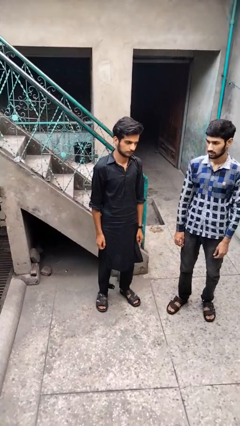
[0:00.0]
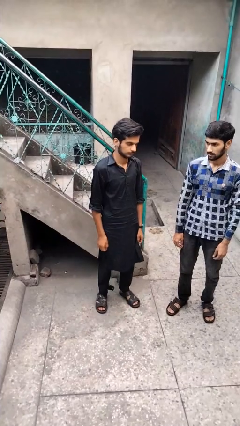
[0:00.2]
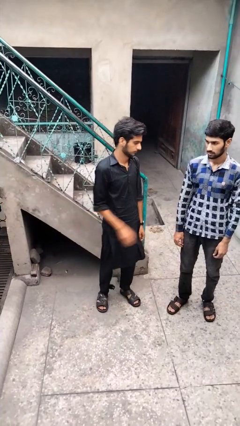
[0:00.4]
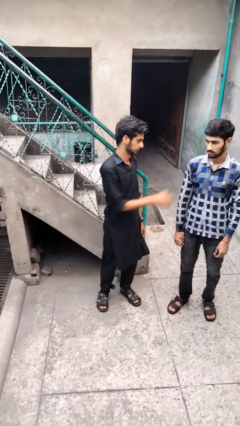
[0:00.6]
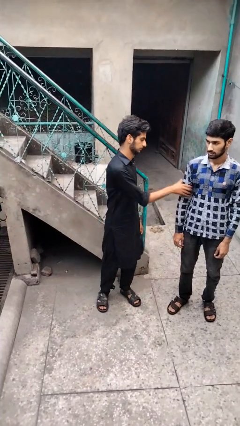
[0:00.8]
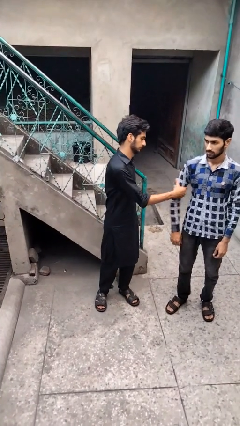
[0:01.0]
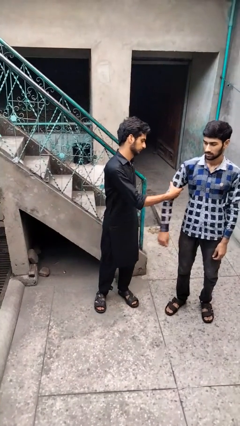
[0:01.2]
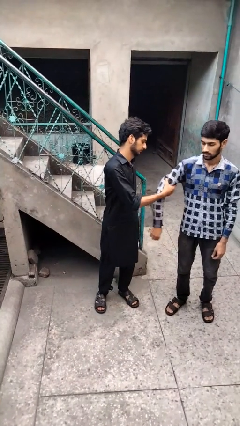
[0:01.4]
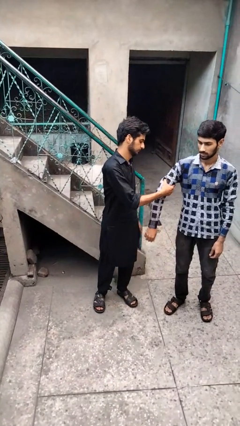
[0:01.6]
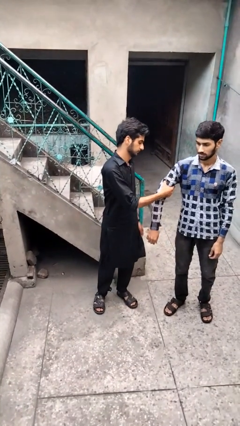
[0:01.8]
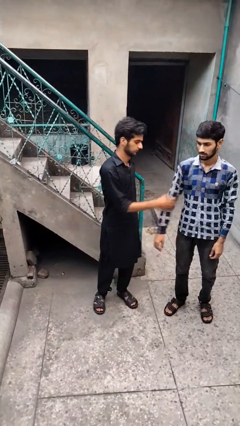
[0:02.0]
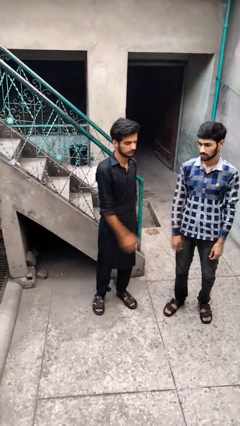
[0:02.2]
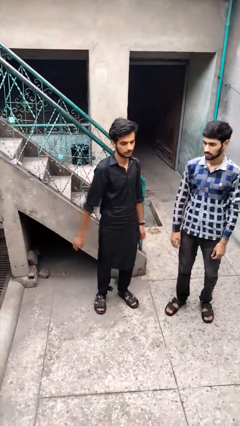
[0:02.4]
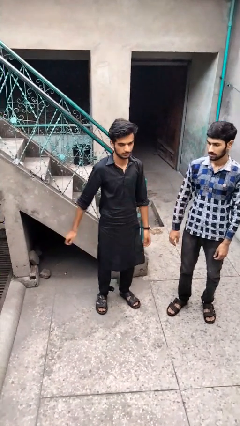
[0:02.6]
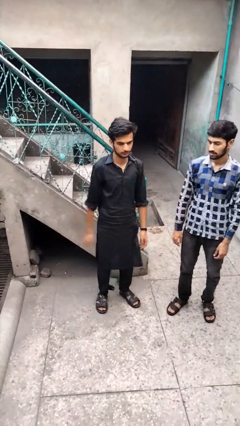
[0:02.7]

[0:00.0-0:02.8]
person grabs person by bicep

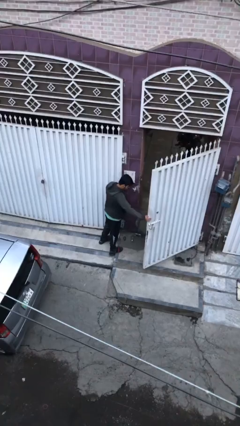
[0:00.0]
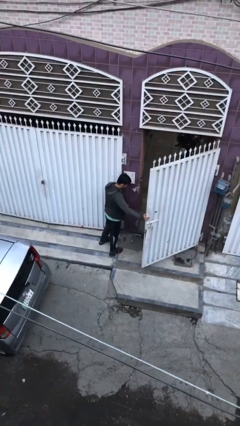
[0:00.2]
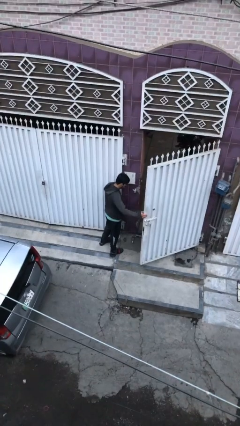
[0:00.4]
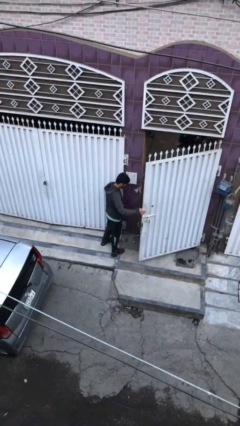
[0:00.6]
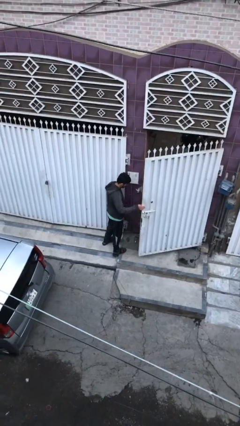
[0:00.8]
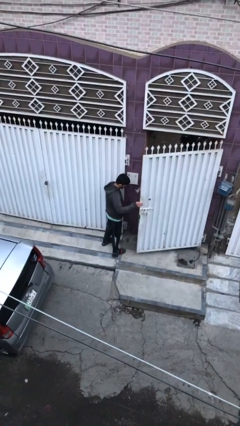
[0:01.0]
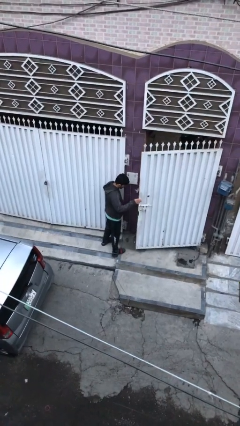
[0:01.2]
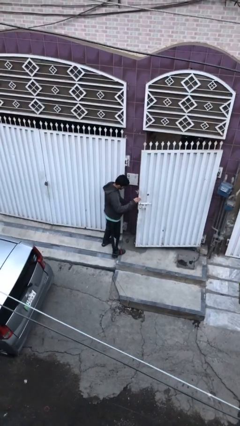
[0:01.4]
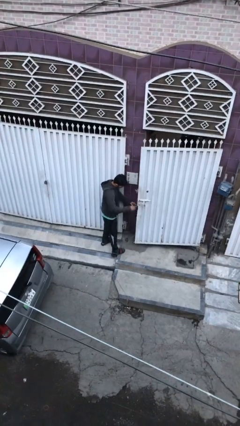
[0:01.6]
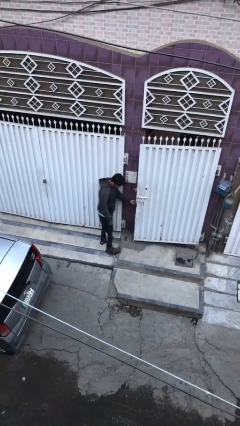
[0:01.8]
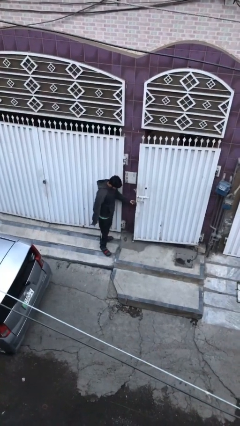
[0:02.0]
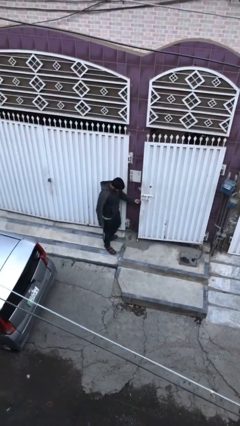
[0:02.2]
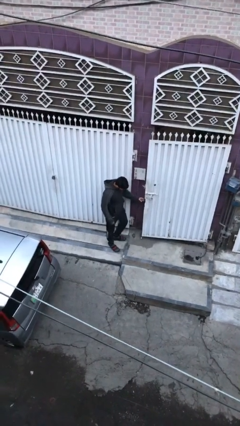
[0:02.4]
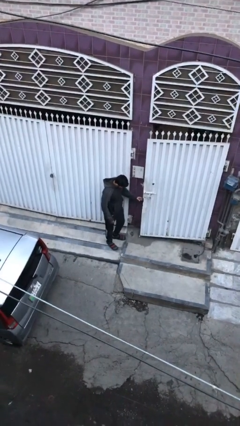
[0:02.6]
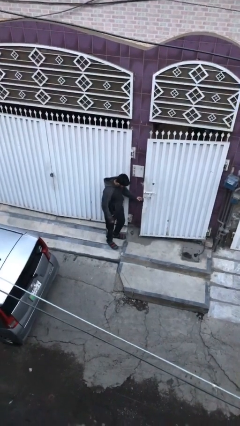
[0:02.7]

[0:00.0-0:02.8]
person closes facility door

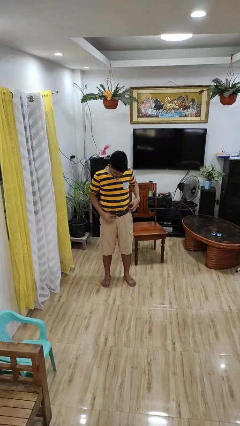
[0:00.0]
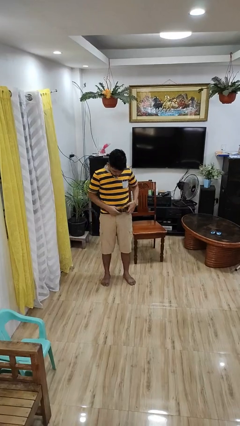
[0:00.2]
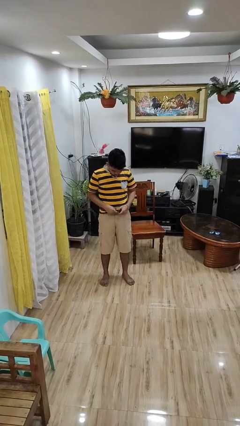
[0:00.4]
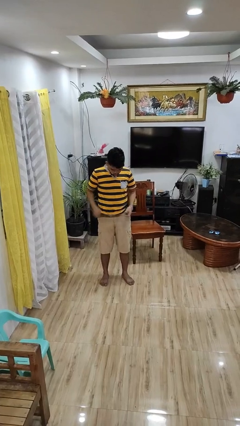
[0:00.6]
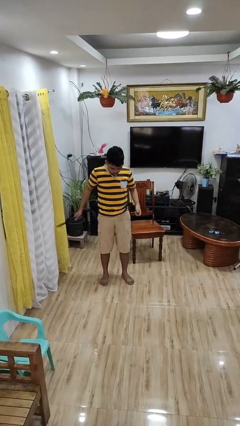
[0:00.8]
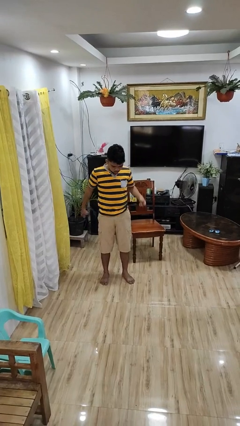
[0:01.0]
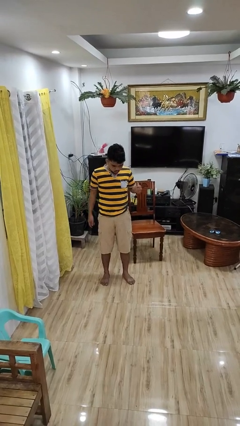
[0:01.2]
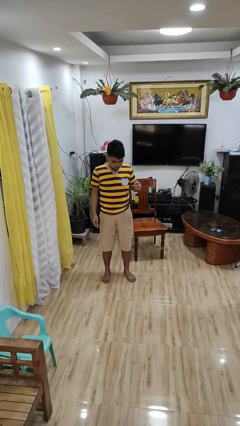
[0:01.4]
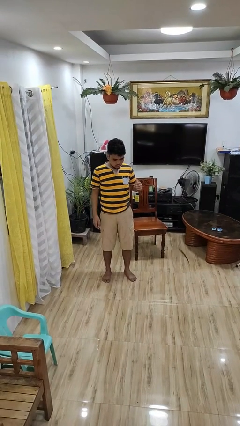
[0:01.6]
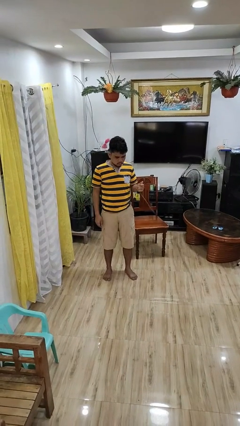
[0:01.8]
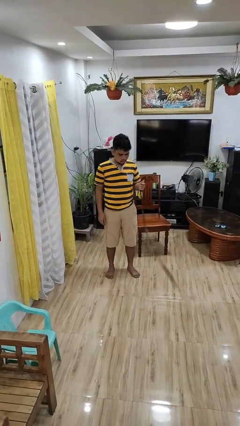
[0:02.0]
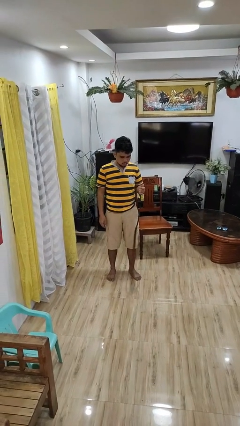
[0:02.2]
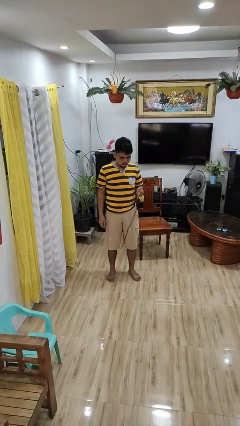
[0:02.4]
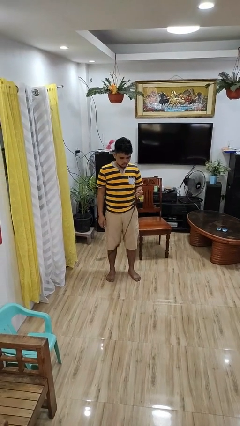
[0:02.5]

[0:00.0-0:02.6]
person takes off belt

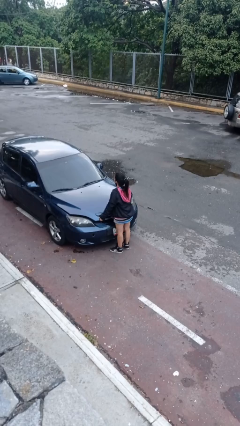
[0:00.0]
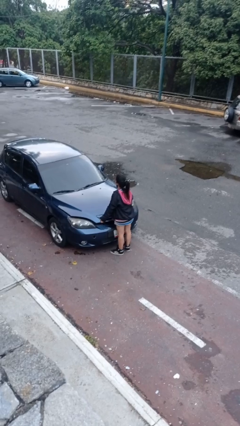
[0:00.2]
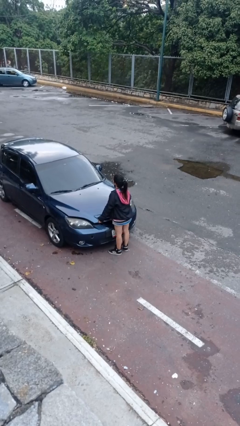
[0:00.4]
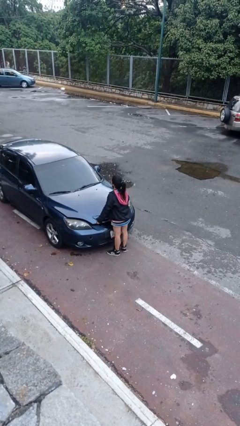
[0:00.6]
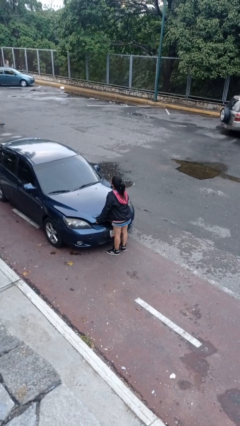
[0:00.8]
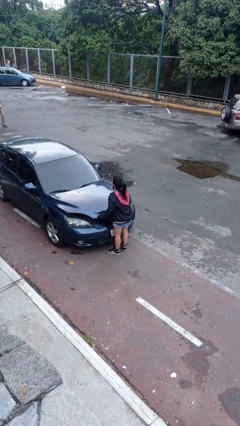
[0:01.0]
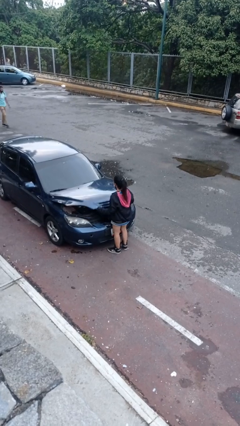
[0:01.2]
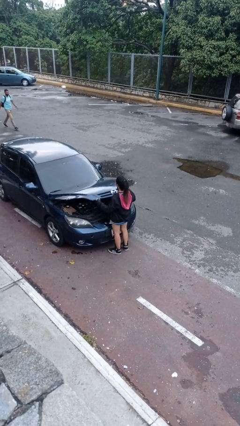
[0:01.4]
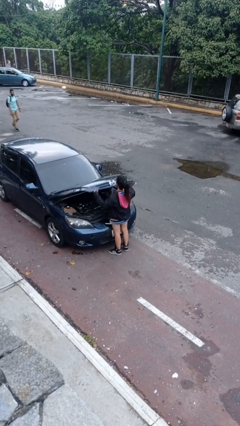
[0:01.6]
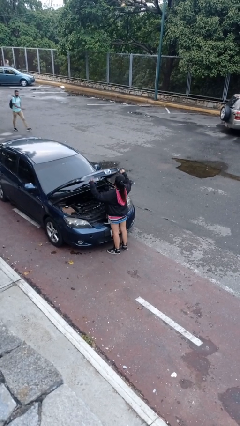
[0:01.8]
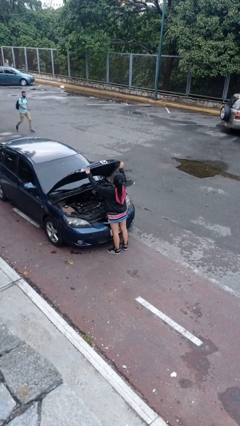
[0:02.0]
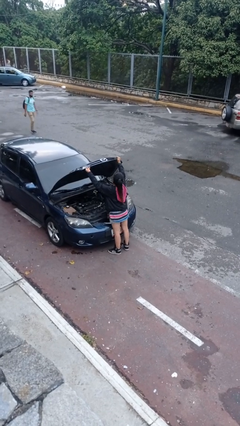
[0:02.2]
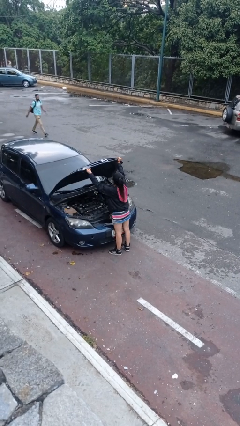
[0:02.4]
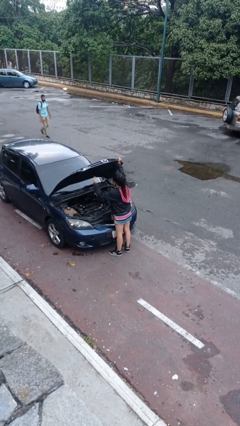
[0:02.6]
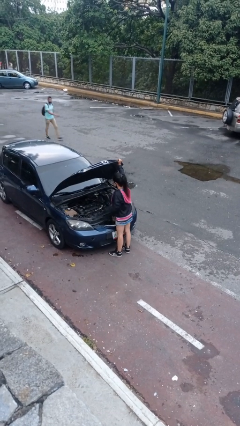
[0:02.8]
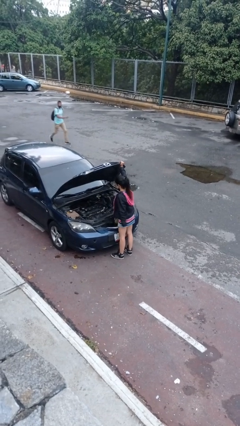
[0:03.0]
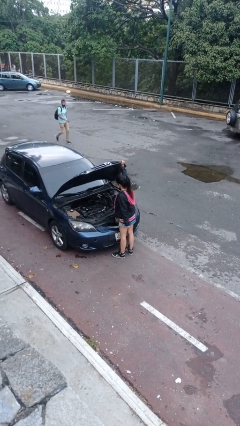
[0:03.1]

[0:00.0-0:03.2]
person opens car hood

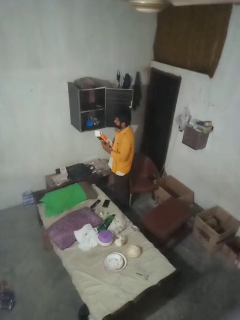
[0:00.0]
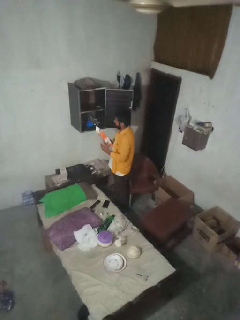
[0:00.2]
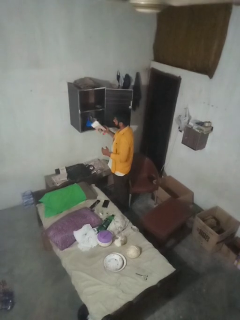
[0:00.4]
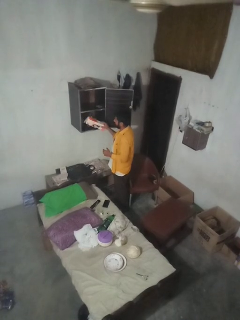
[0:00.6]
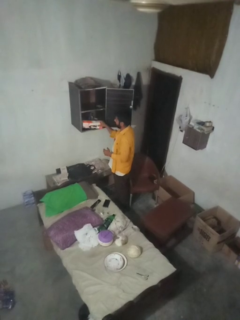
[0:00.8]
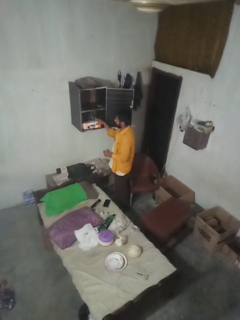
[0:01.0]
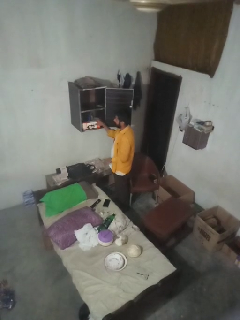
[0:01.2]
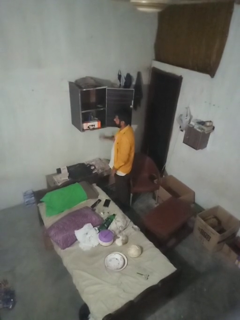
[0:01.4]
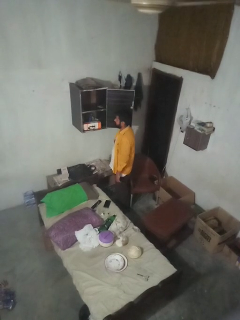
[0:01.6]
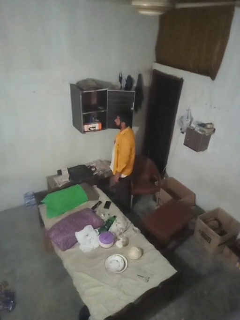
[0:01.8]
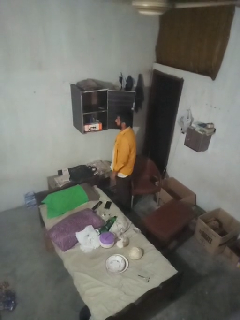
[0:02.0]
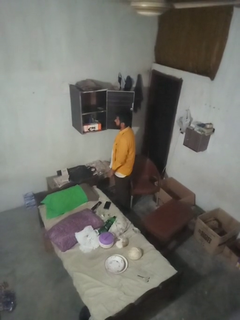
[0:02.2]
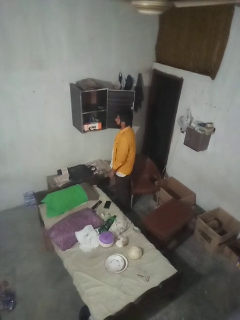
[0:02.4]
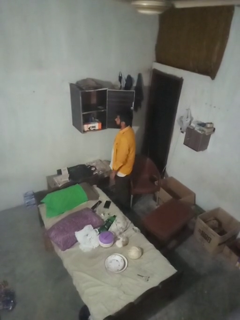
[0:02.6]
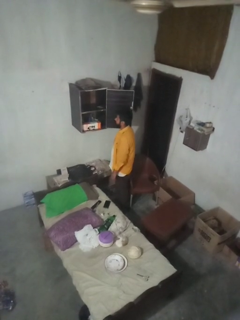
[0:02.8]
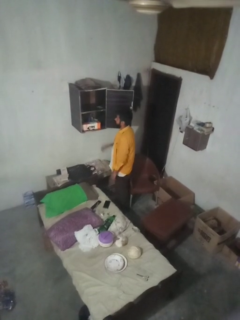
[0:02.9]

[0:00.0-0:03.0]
person puts down object into cabinet

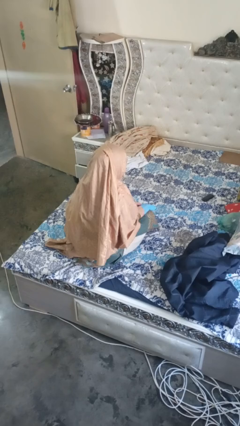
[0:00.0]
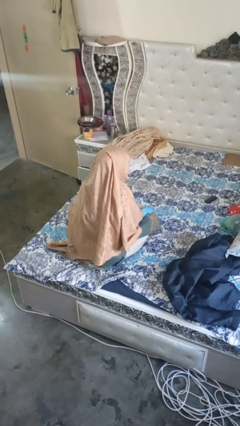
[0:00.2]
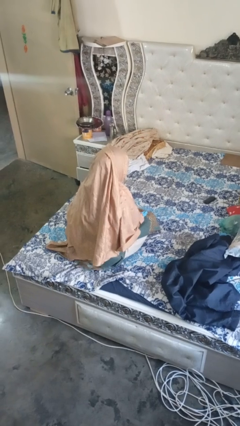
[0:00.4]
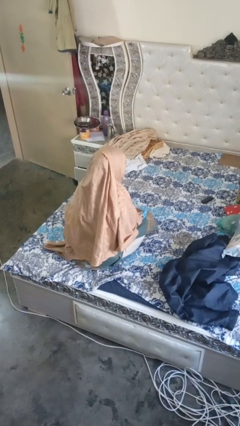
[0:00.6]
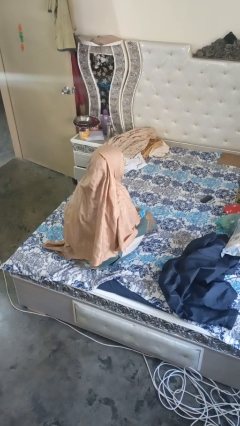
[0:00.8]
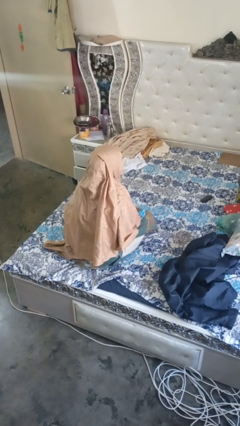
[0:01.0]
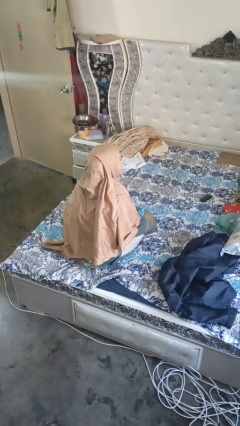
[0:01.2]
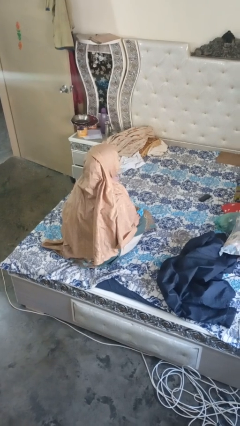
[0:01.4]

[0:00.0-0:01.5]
person takes off gloves

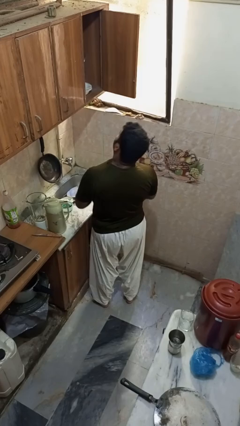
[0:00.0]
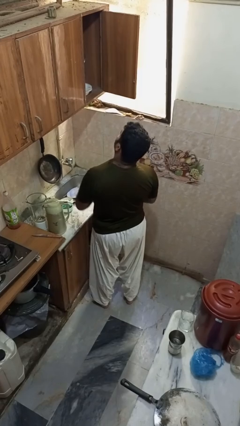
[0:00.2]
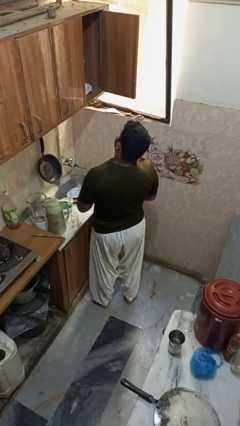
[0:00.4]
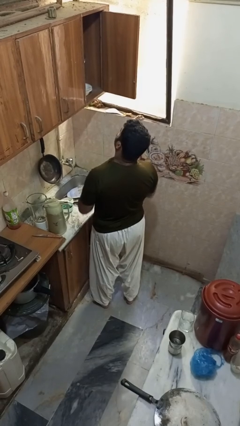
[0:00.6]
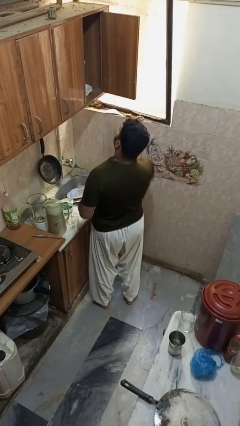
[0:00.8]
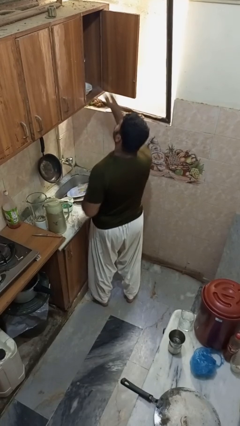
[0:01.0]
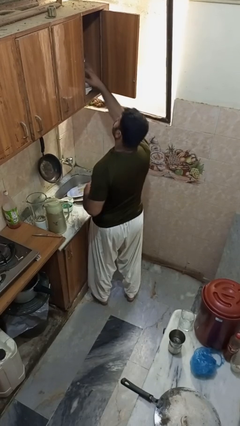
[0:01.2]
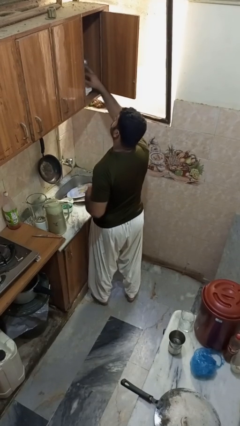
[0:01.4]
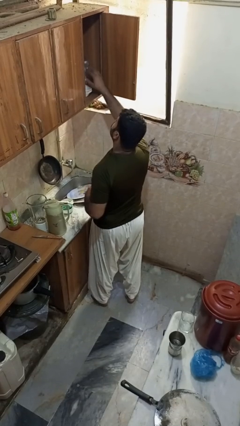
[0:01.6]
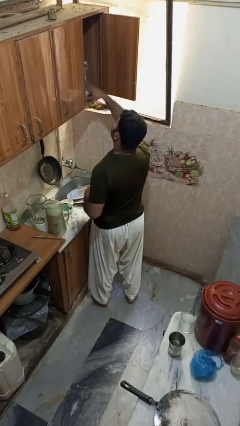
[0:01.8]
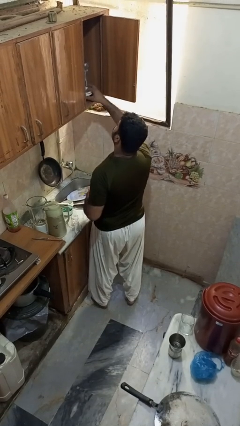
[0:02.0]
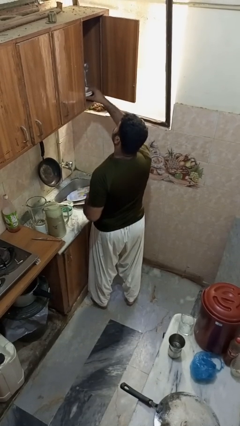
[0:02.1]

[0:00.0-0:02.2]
person takes object from cabinet

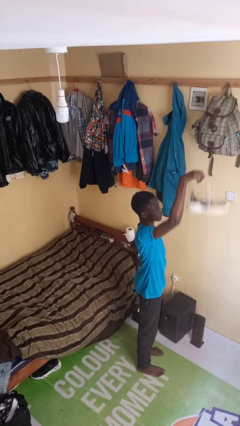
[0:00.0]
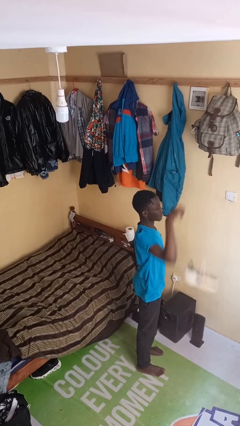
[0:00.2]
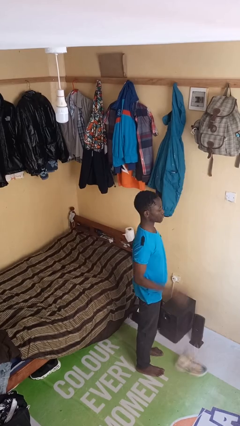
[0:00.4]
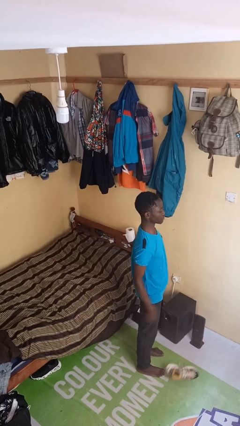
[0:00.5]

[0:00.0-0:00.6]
person drops object
